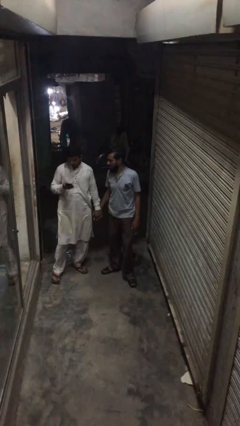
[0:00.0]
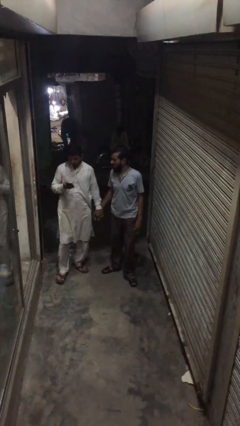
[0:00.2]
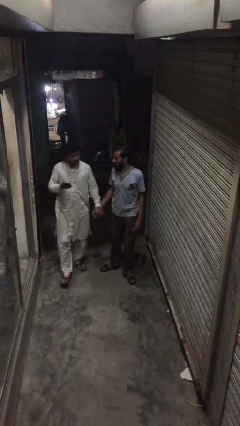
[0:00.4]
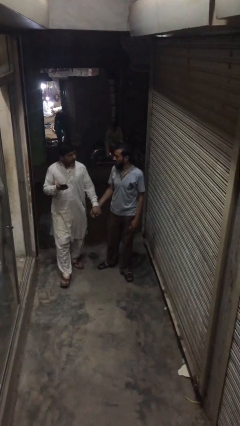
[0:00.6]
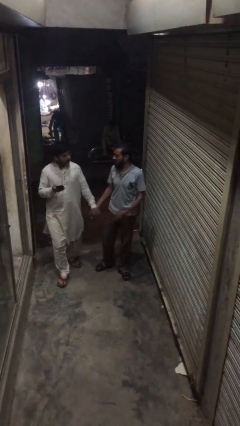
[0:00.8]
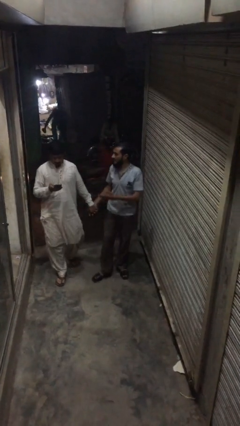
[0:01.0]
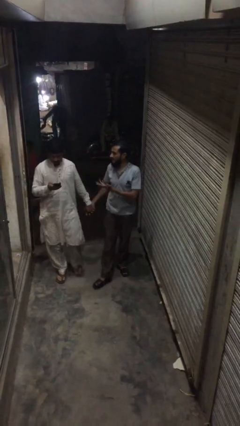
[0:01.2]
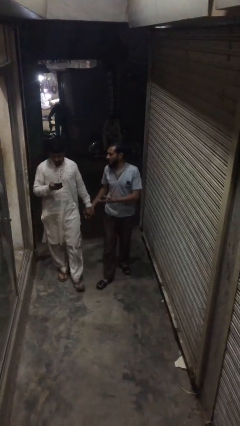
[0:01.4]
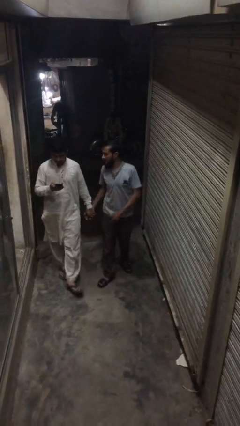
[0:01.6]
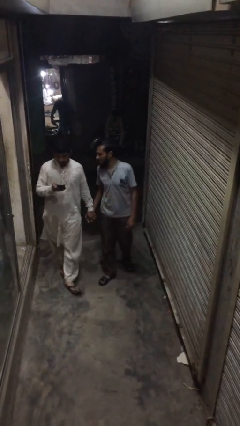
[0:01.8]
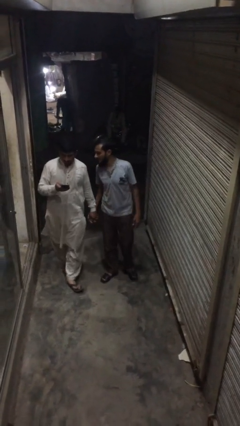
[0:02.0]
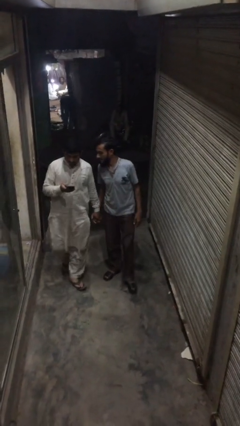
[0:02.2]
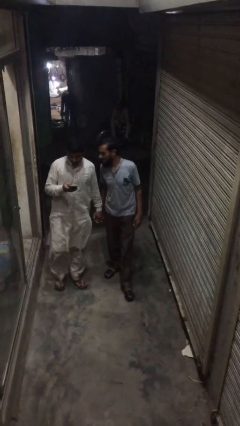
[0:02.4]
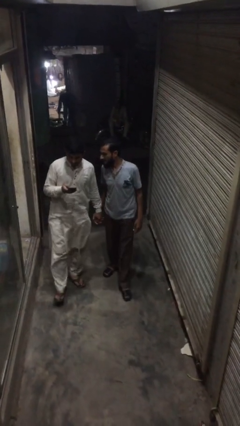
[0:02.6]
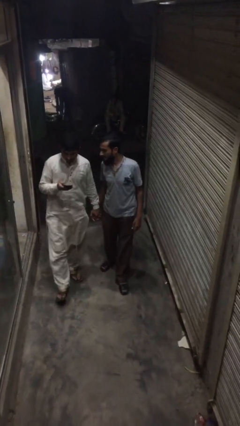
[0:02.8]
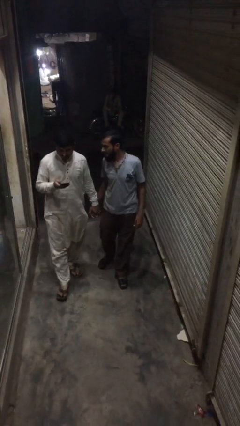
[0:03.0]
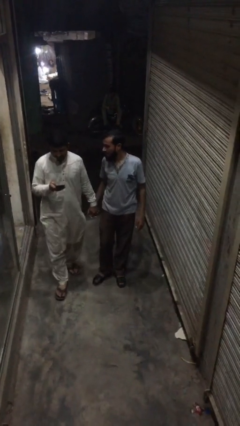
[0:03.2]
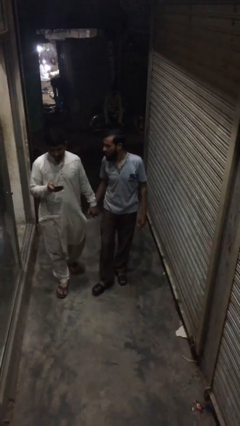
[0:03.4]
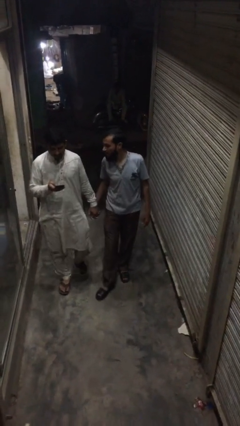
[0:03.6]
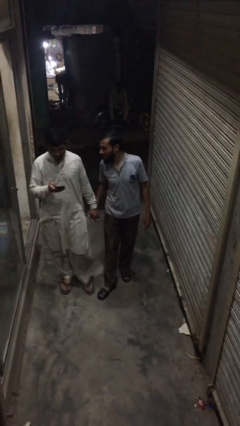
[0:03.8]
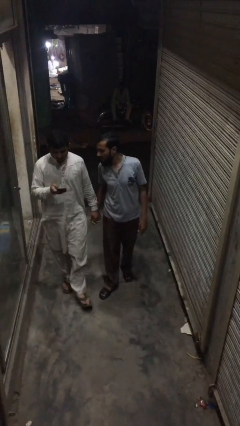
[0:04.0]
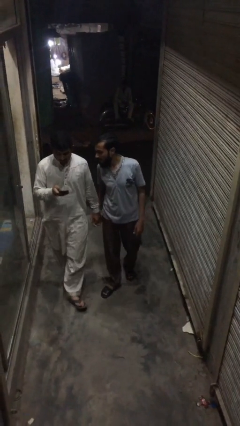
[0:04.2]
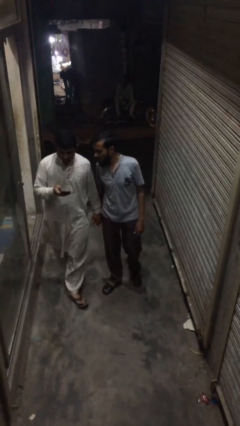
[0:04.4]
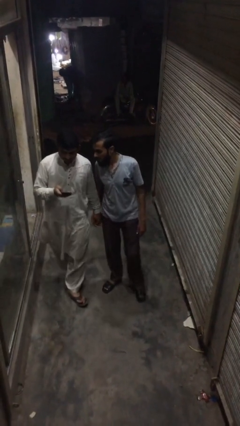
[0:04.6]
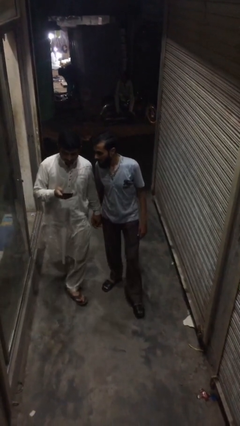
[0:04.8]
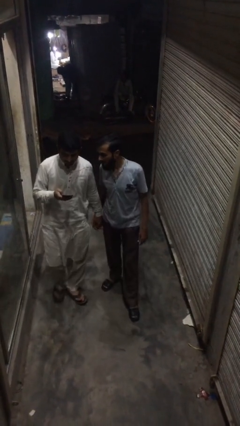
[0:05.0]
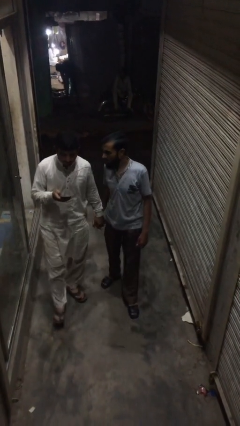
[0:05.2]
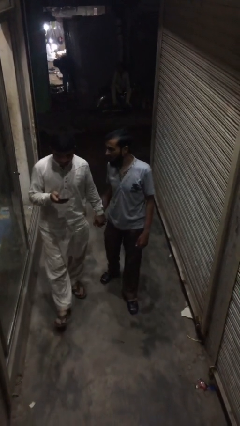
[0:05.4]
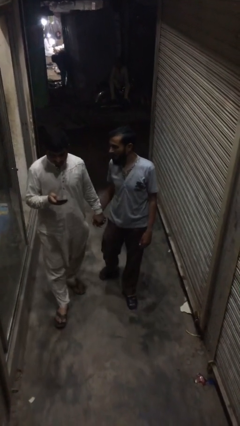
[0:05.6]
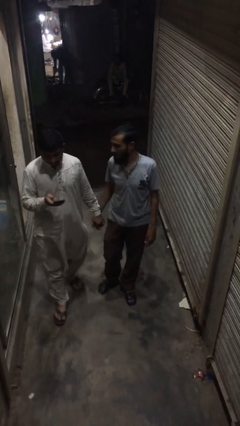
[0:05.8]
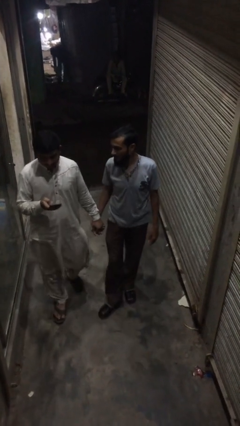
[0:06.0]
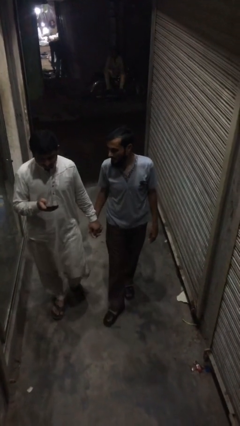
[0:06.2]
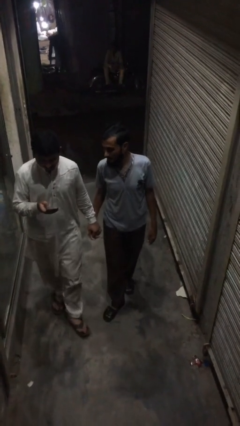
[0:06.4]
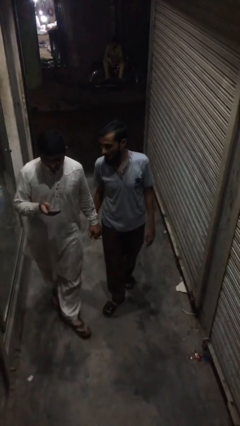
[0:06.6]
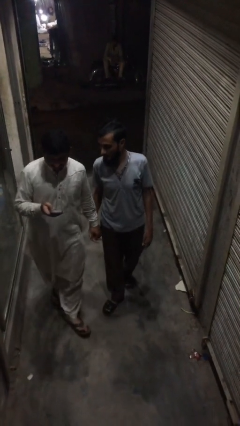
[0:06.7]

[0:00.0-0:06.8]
person holds hand

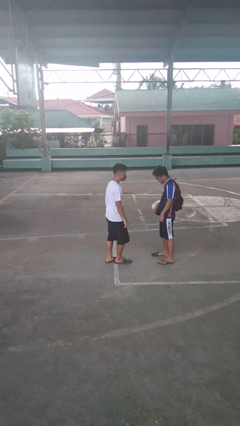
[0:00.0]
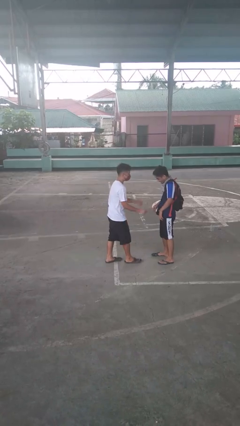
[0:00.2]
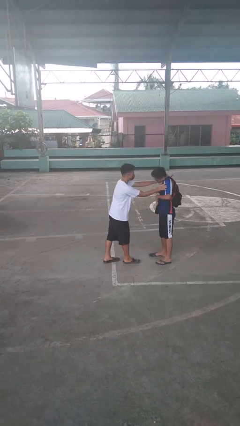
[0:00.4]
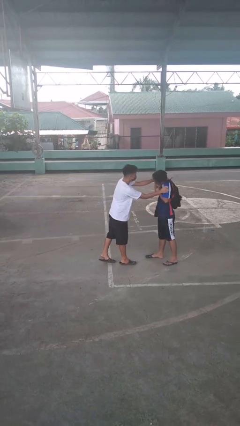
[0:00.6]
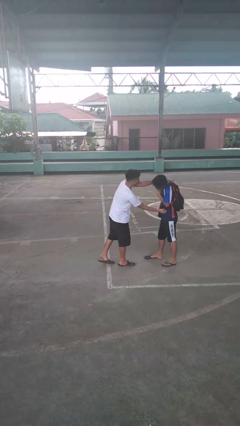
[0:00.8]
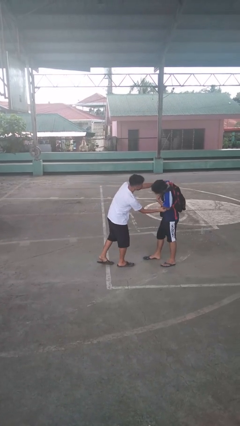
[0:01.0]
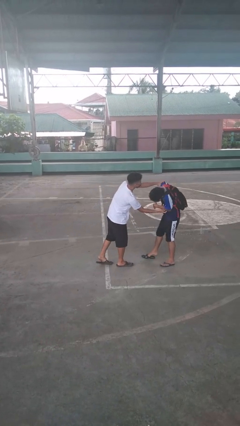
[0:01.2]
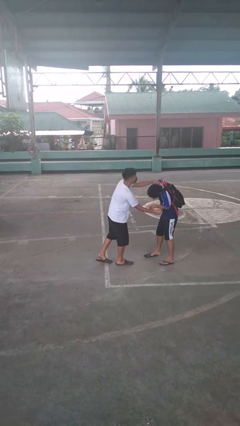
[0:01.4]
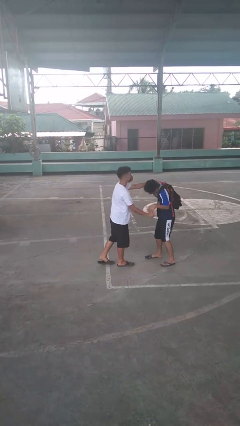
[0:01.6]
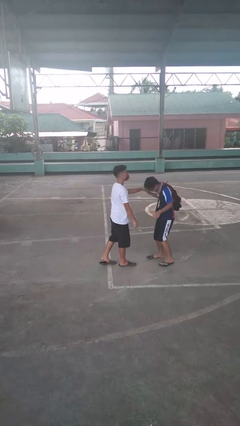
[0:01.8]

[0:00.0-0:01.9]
person tickles person

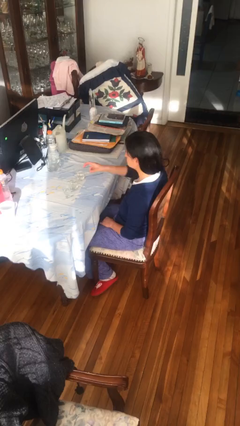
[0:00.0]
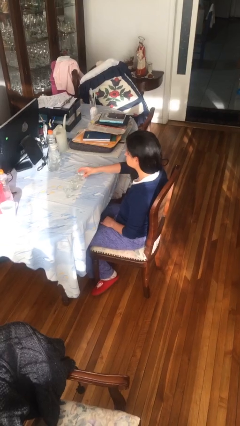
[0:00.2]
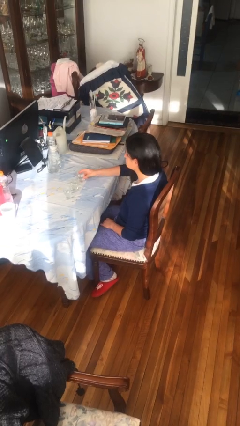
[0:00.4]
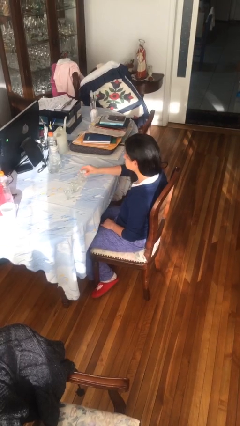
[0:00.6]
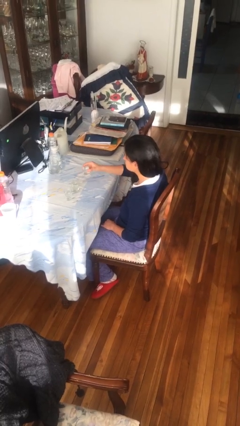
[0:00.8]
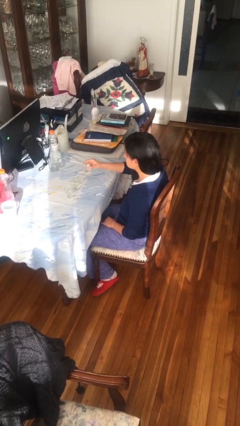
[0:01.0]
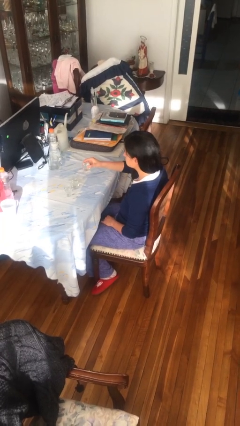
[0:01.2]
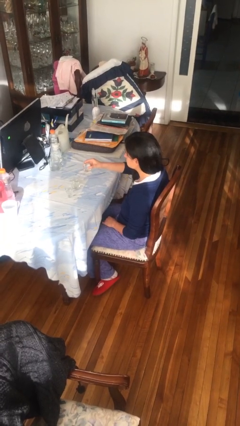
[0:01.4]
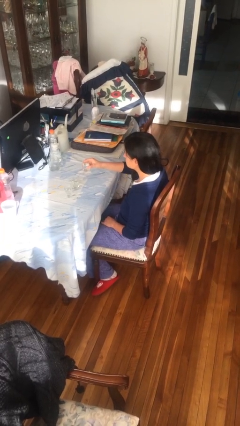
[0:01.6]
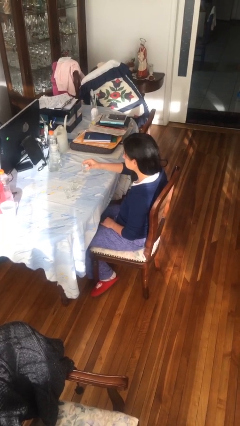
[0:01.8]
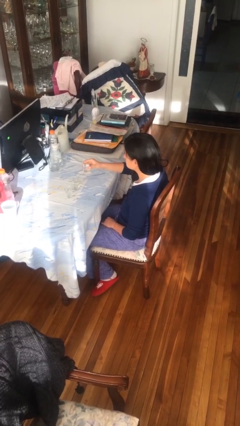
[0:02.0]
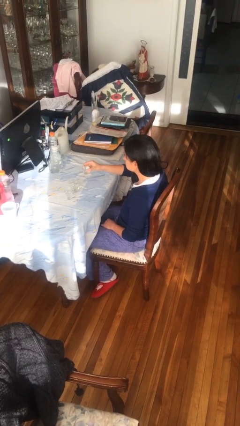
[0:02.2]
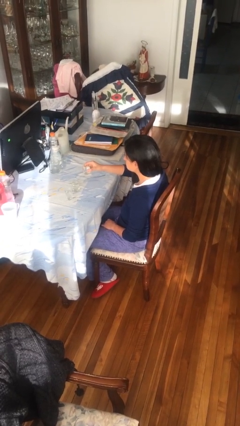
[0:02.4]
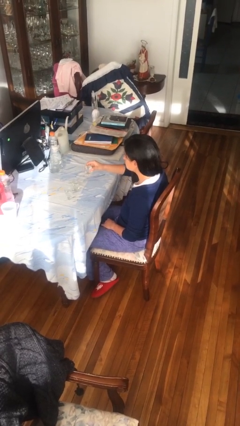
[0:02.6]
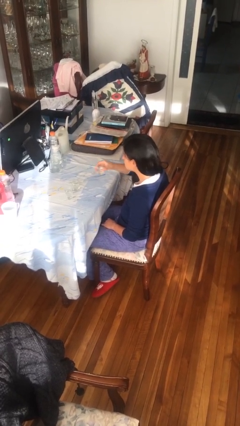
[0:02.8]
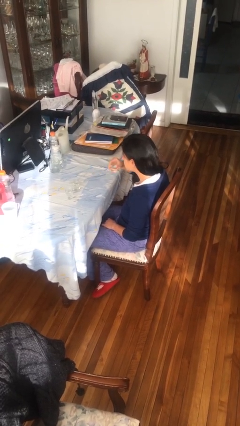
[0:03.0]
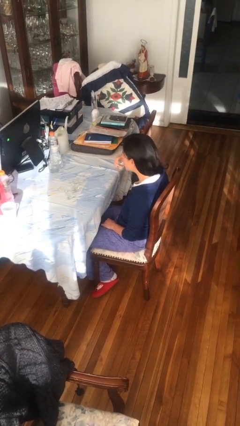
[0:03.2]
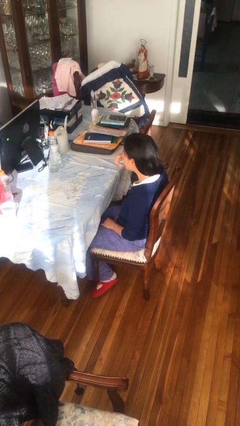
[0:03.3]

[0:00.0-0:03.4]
person picks up object from table

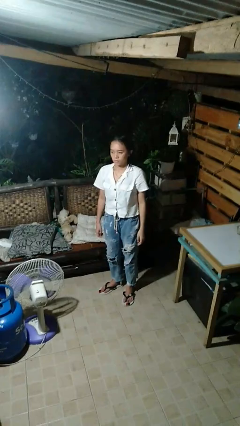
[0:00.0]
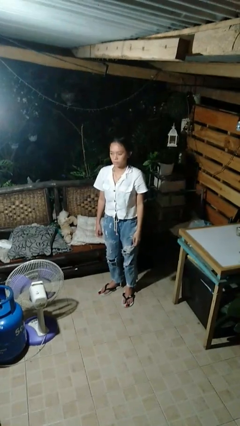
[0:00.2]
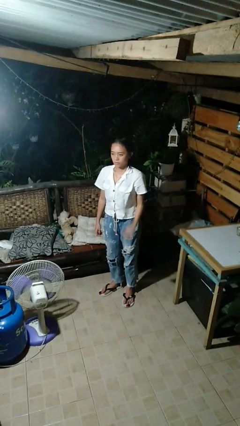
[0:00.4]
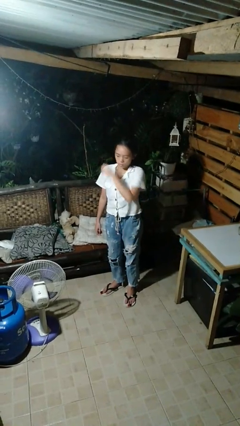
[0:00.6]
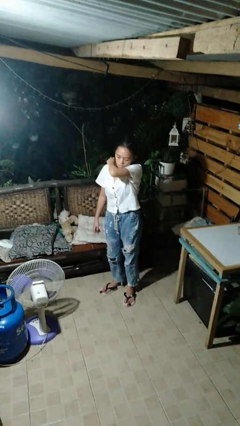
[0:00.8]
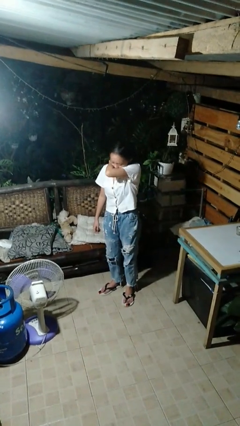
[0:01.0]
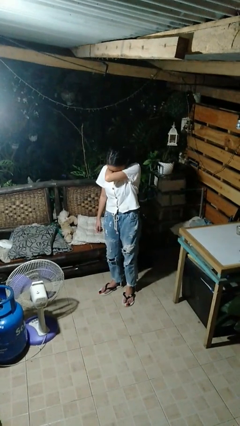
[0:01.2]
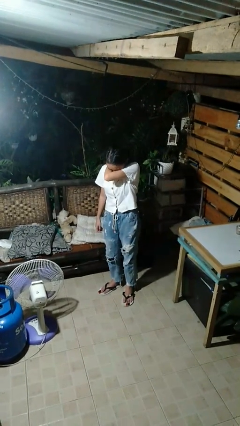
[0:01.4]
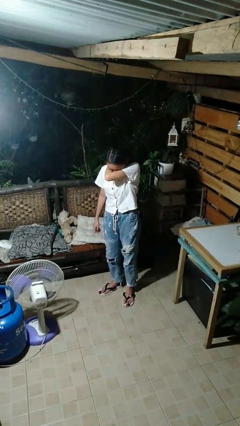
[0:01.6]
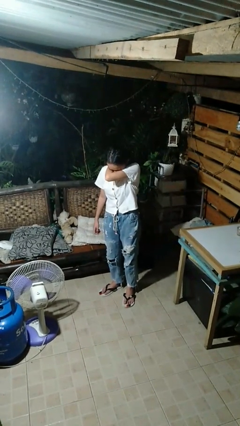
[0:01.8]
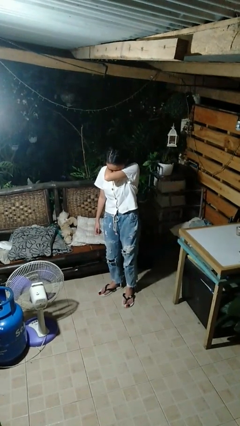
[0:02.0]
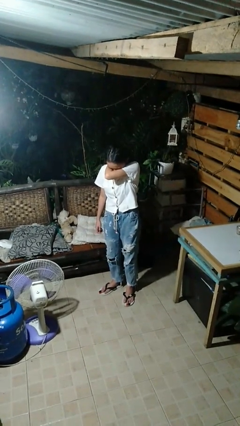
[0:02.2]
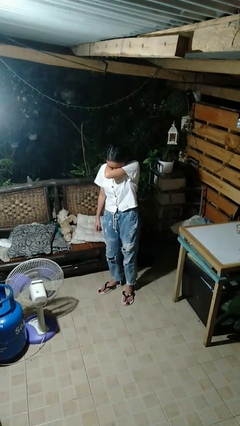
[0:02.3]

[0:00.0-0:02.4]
person sneezes into arm

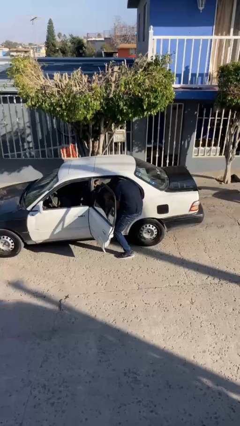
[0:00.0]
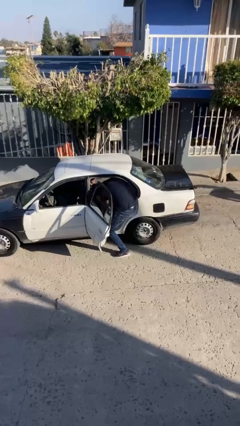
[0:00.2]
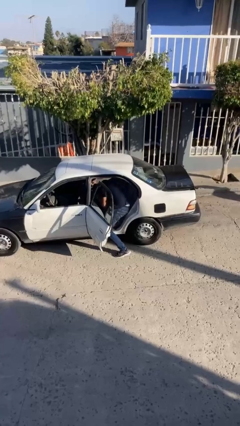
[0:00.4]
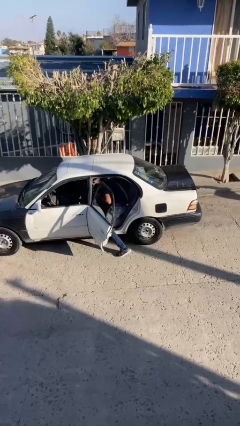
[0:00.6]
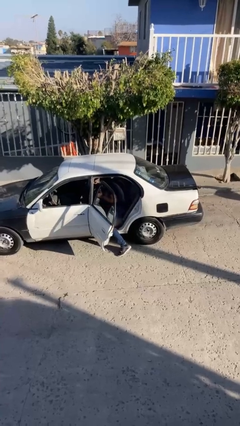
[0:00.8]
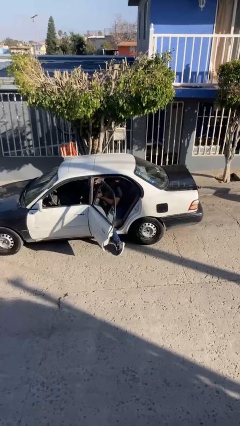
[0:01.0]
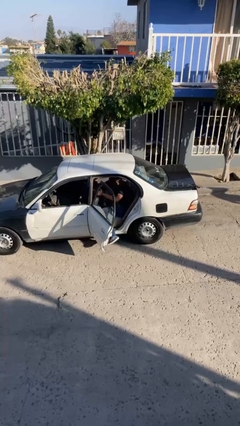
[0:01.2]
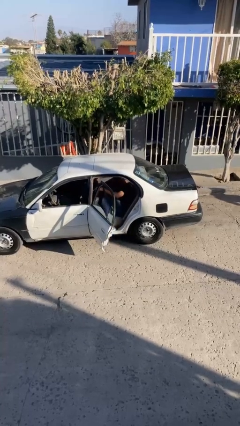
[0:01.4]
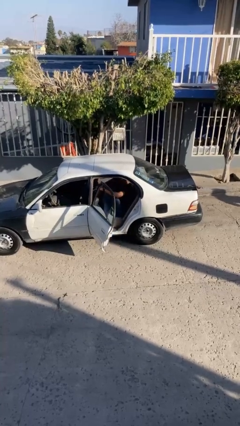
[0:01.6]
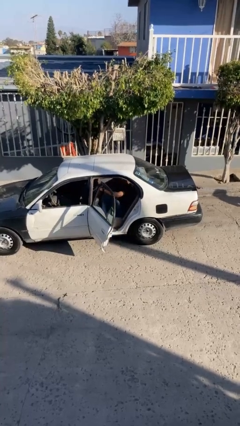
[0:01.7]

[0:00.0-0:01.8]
person enters car

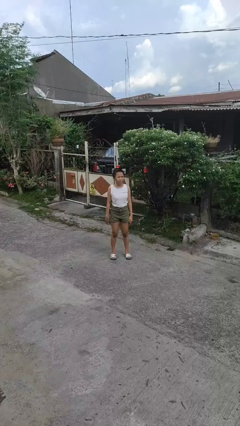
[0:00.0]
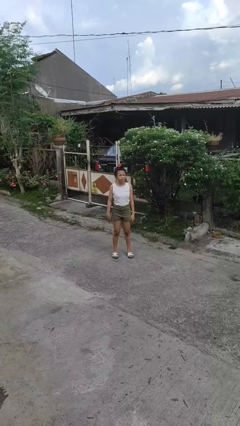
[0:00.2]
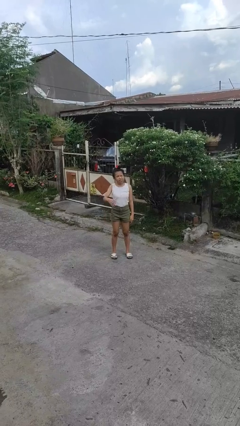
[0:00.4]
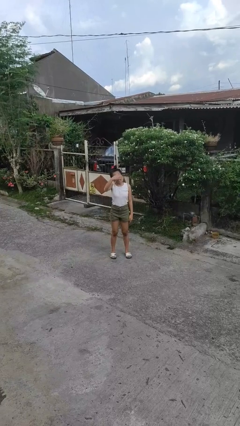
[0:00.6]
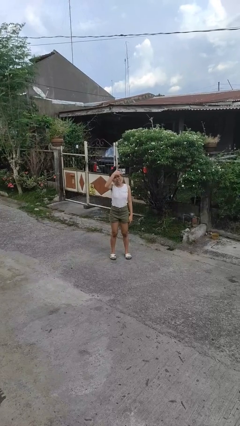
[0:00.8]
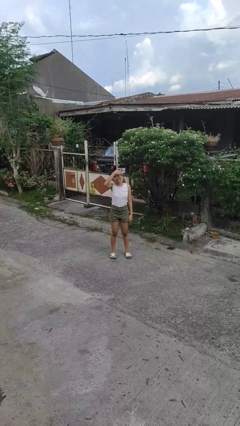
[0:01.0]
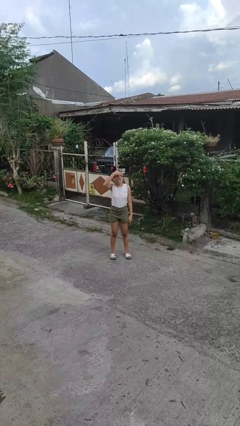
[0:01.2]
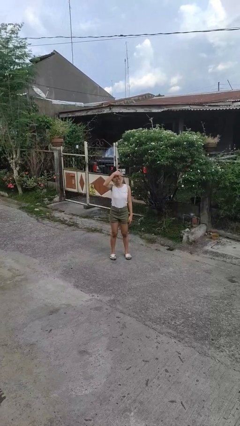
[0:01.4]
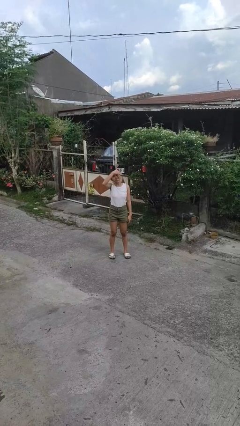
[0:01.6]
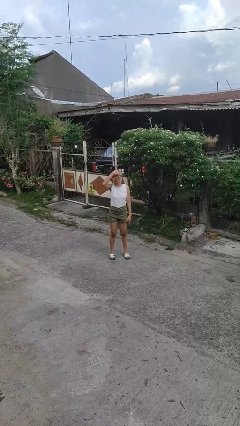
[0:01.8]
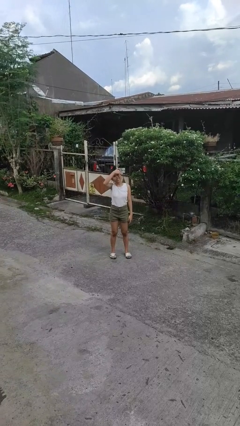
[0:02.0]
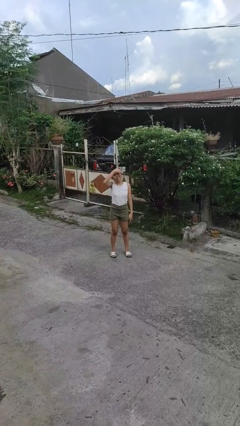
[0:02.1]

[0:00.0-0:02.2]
person shades eyes
